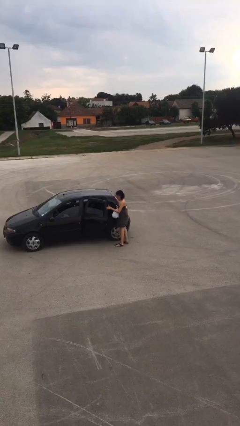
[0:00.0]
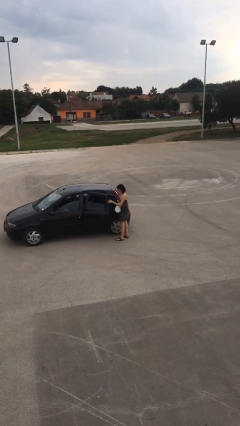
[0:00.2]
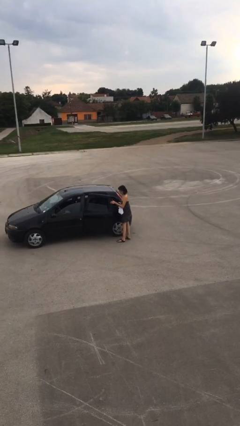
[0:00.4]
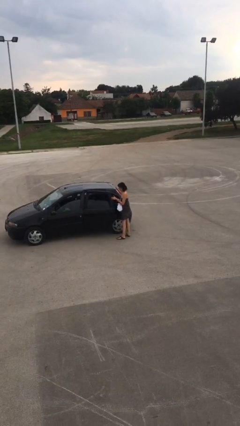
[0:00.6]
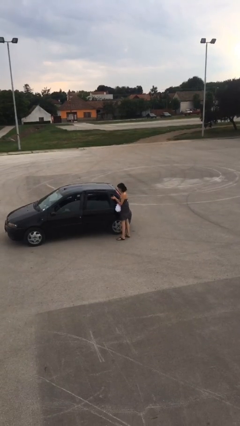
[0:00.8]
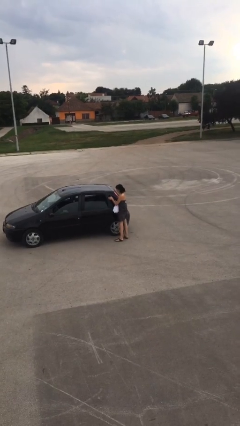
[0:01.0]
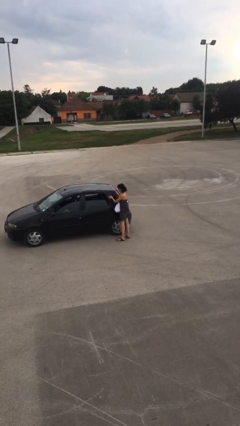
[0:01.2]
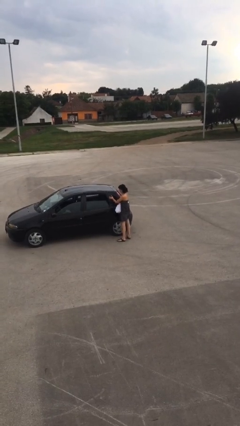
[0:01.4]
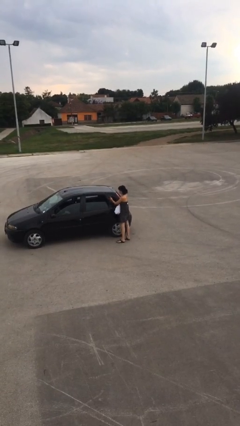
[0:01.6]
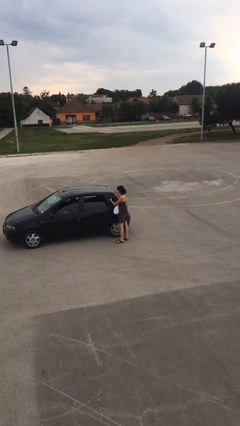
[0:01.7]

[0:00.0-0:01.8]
person closes car door

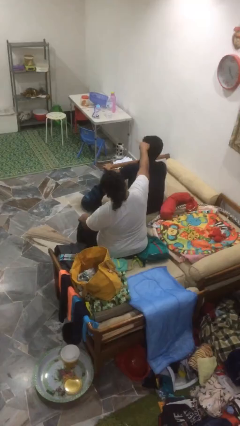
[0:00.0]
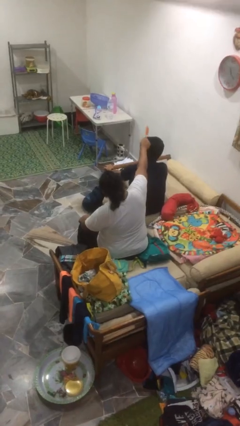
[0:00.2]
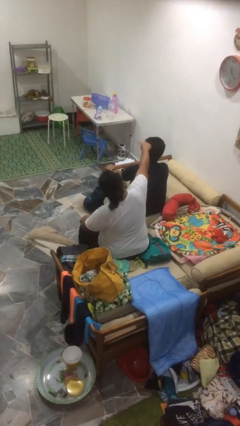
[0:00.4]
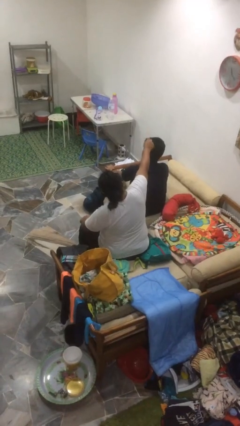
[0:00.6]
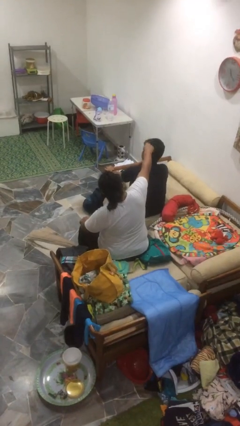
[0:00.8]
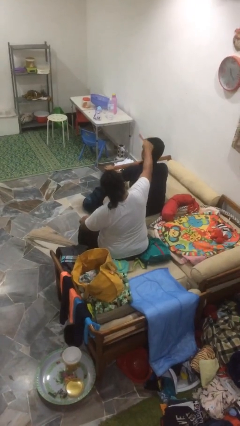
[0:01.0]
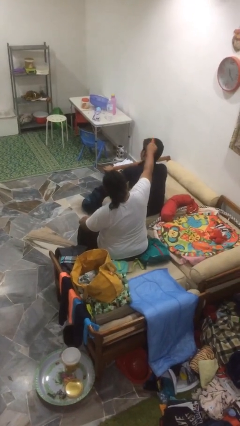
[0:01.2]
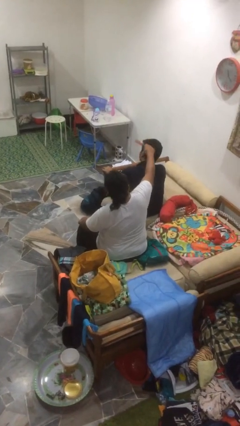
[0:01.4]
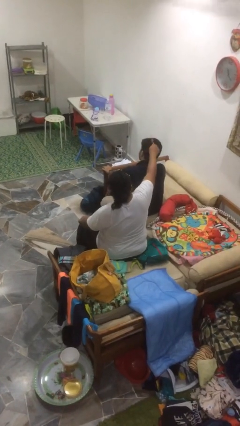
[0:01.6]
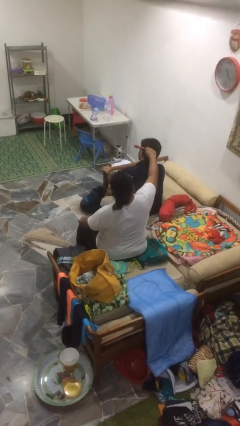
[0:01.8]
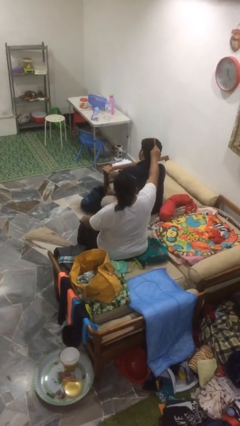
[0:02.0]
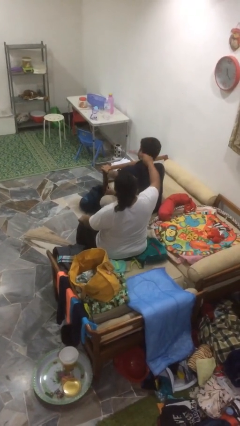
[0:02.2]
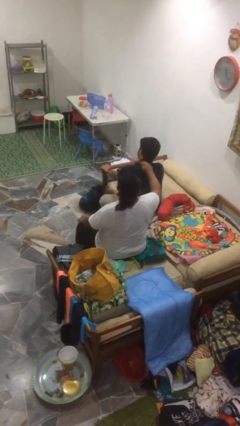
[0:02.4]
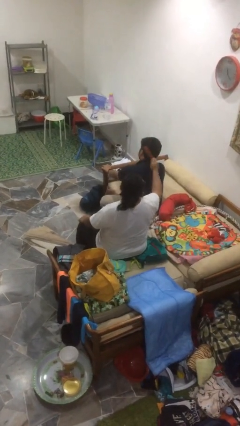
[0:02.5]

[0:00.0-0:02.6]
person brushes hair of person

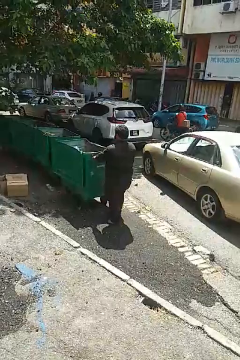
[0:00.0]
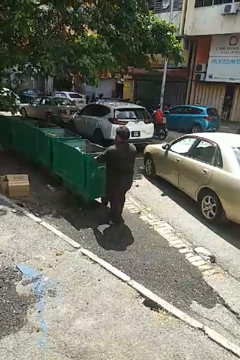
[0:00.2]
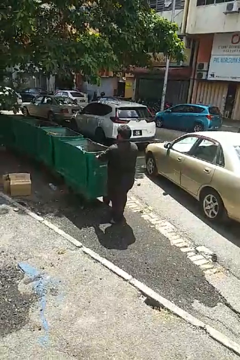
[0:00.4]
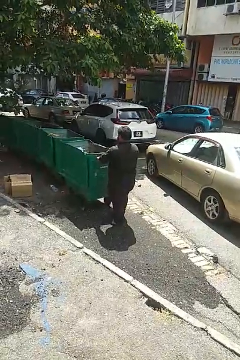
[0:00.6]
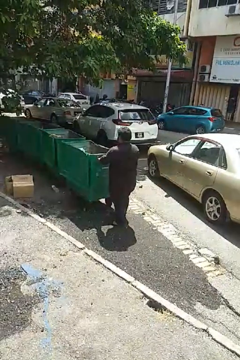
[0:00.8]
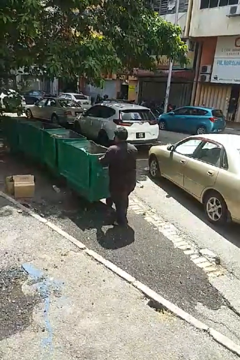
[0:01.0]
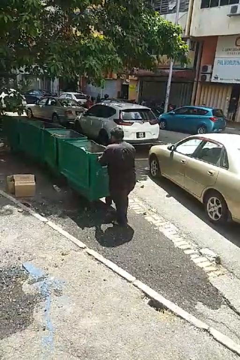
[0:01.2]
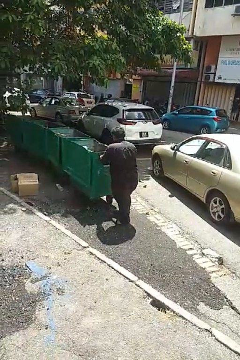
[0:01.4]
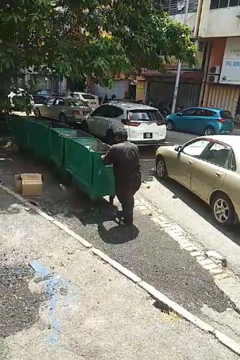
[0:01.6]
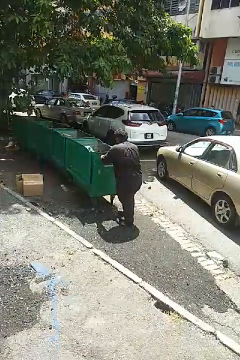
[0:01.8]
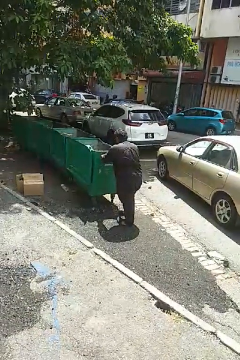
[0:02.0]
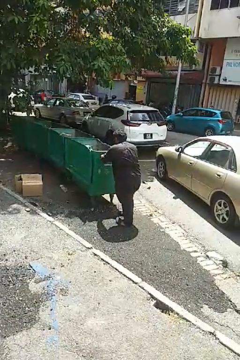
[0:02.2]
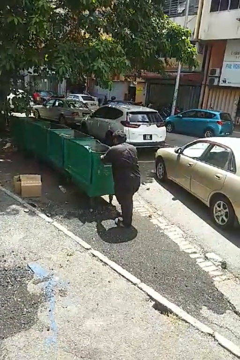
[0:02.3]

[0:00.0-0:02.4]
person pushes wheeled trashcan

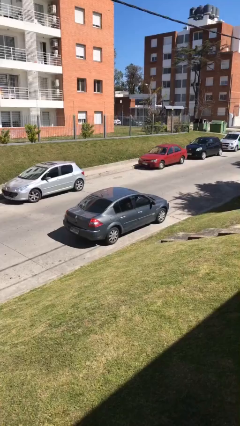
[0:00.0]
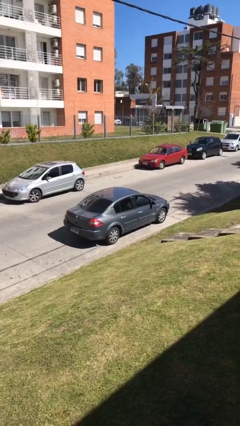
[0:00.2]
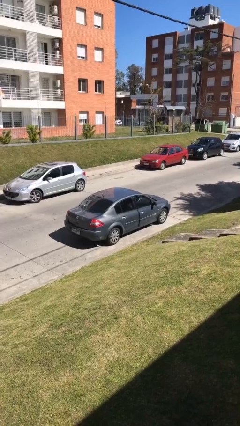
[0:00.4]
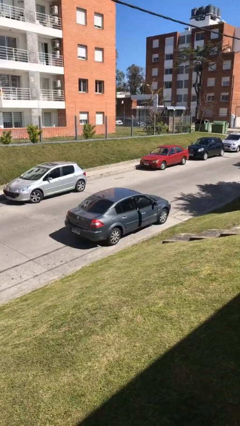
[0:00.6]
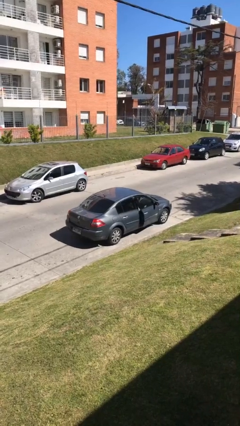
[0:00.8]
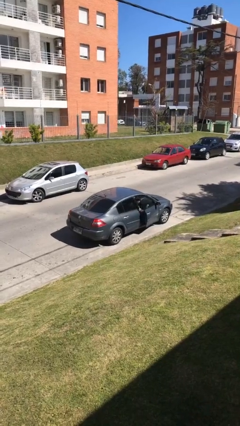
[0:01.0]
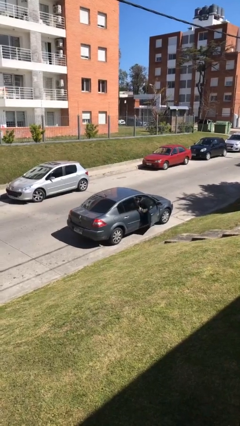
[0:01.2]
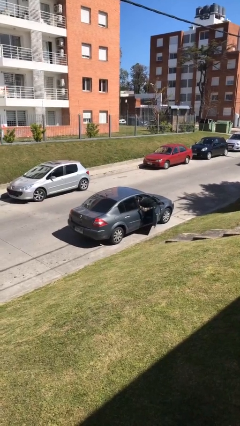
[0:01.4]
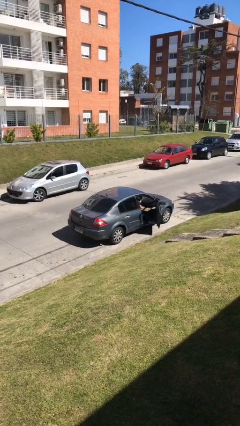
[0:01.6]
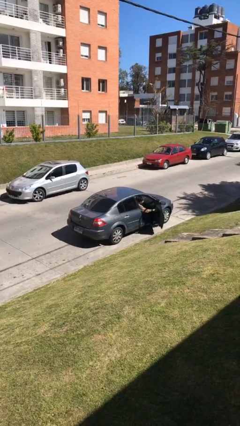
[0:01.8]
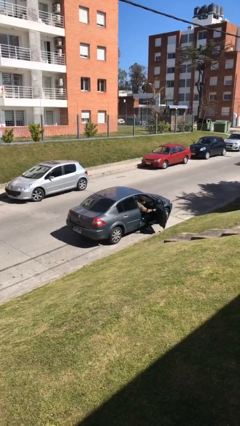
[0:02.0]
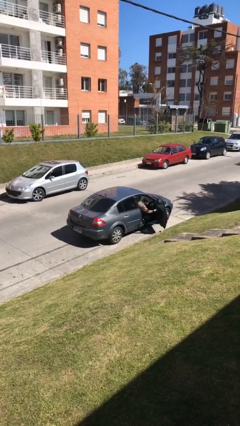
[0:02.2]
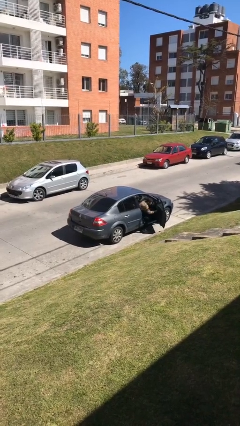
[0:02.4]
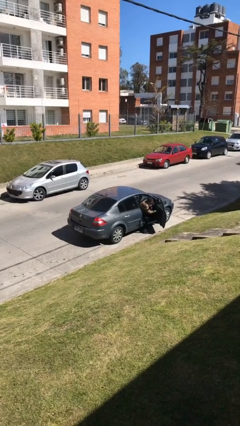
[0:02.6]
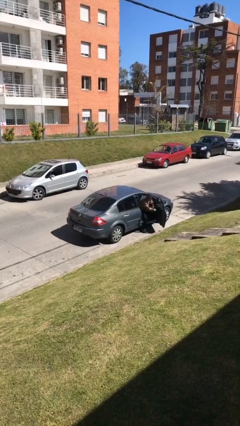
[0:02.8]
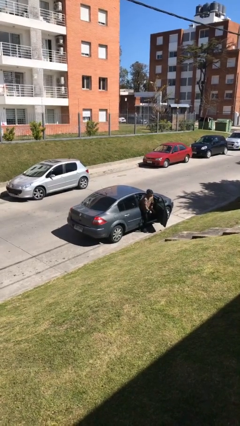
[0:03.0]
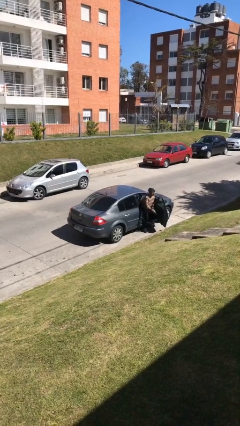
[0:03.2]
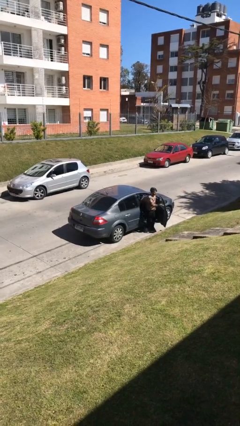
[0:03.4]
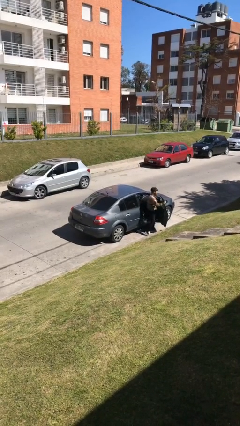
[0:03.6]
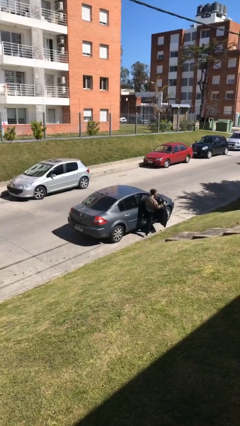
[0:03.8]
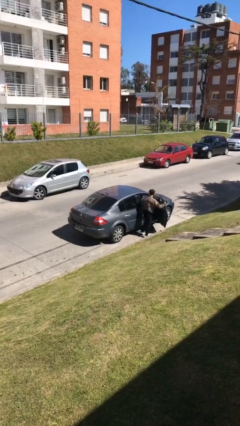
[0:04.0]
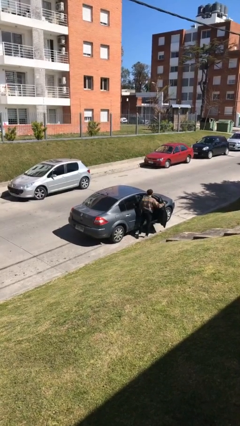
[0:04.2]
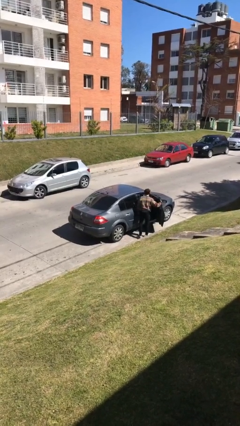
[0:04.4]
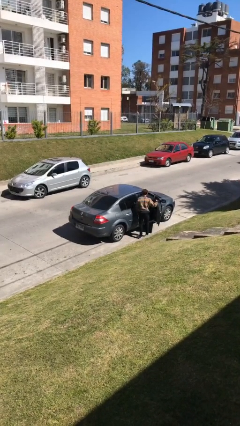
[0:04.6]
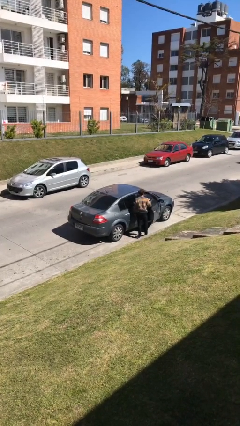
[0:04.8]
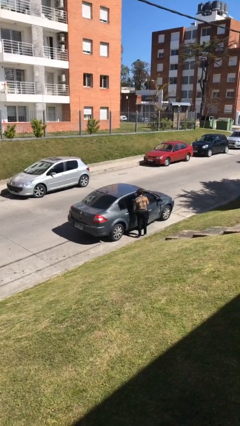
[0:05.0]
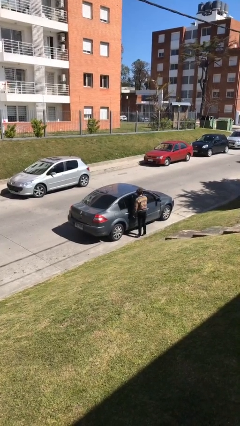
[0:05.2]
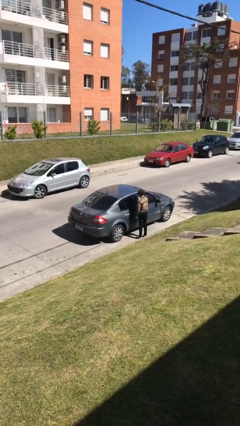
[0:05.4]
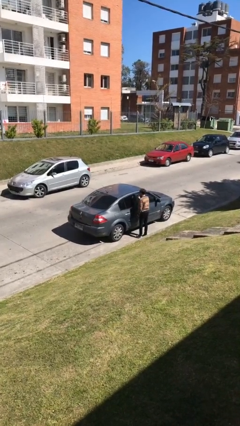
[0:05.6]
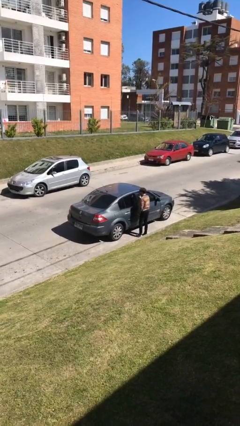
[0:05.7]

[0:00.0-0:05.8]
car drops off person

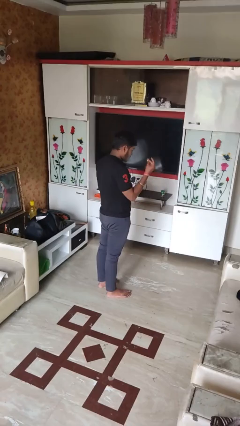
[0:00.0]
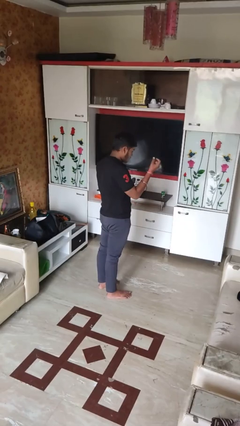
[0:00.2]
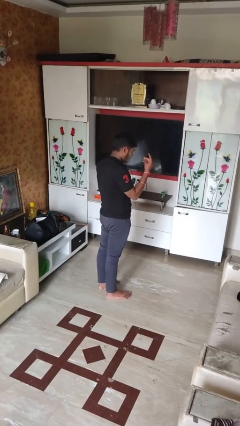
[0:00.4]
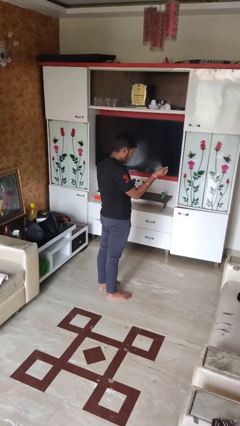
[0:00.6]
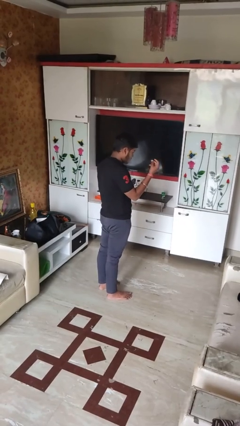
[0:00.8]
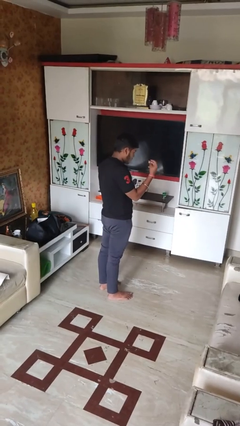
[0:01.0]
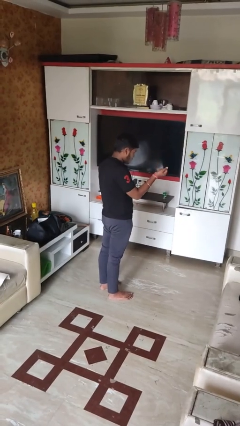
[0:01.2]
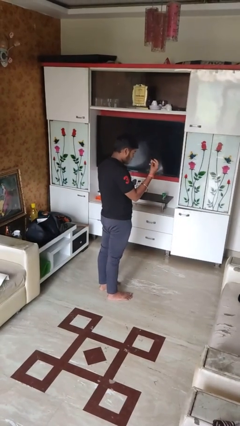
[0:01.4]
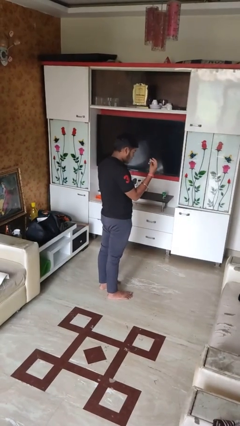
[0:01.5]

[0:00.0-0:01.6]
person snaps fingers

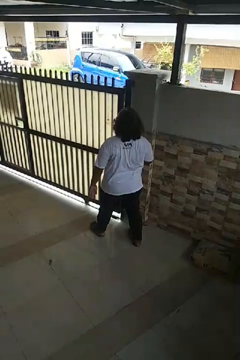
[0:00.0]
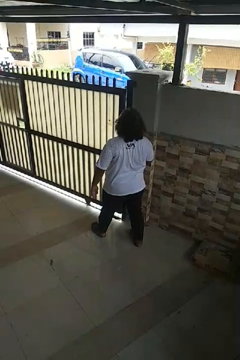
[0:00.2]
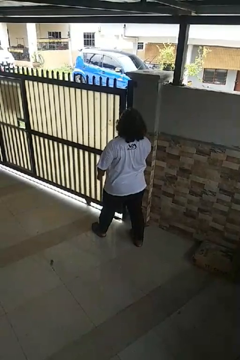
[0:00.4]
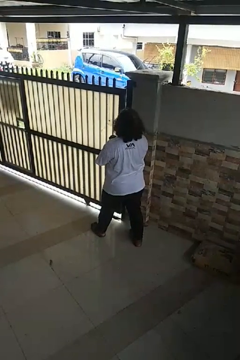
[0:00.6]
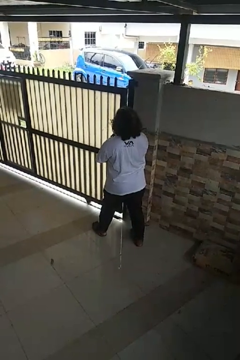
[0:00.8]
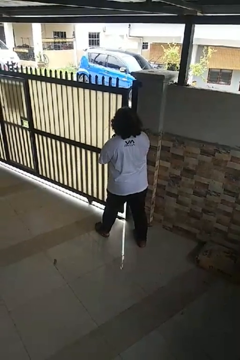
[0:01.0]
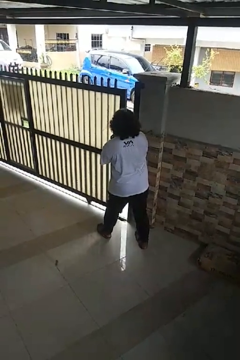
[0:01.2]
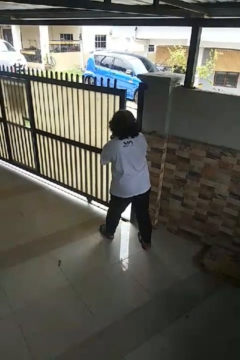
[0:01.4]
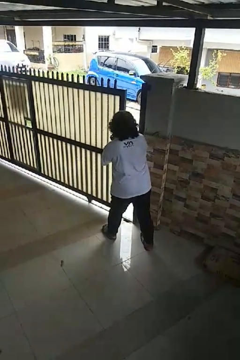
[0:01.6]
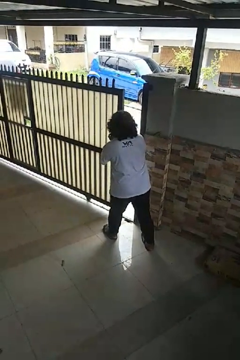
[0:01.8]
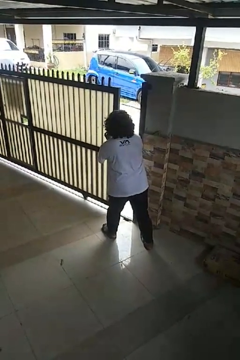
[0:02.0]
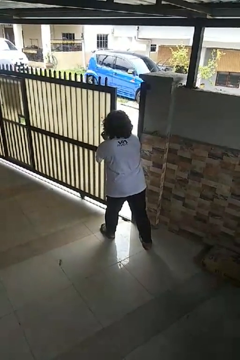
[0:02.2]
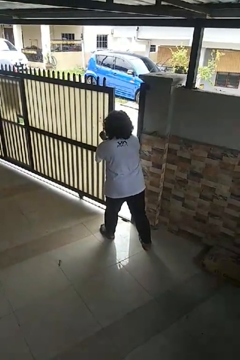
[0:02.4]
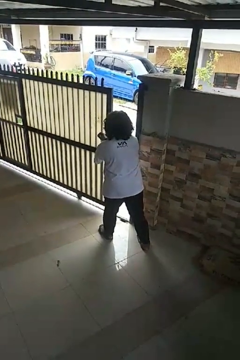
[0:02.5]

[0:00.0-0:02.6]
person opens sliding door

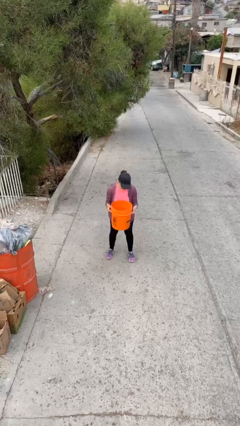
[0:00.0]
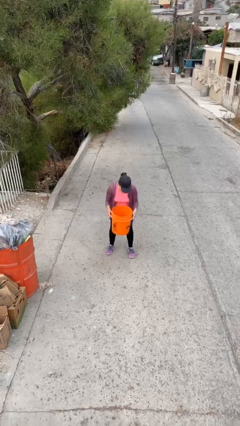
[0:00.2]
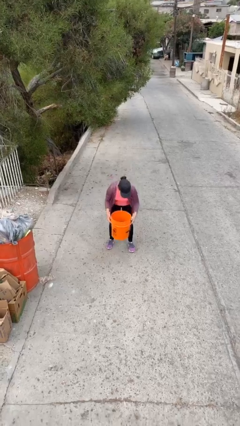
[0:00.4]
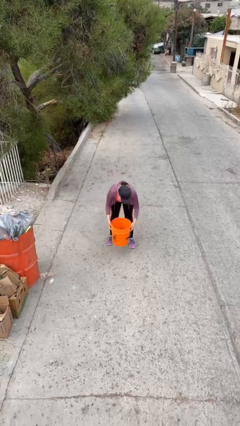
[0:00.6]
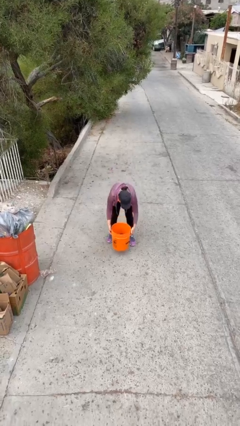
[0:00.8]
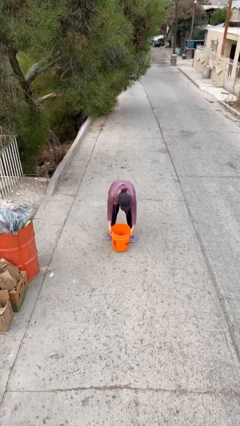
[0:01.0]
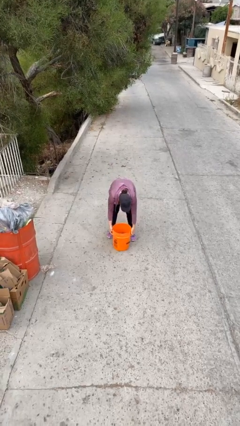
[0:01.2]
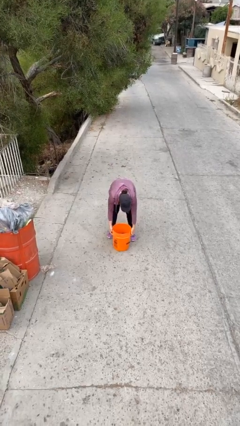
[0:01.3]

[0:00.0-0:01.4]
person puts down object on floor
